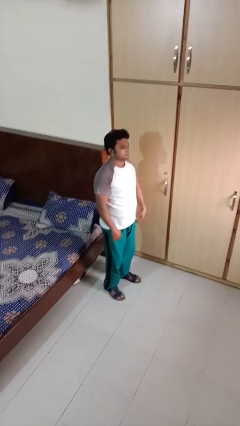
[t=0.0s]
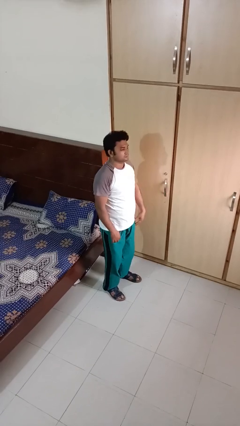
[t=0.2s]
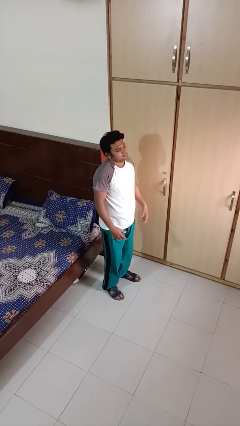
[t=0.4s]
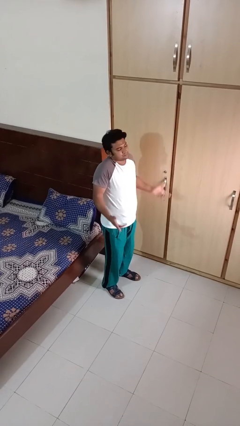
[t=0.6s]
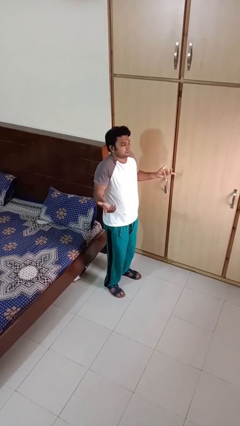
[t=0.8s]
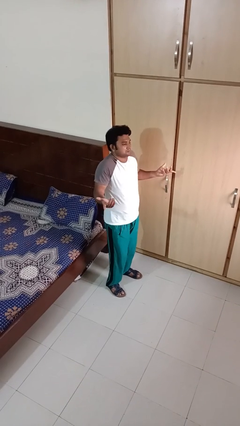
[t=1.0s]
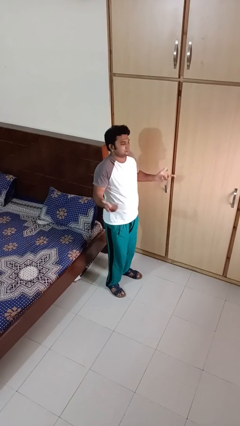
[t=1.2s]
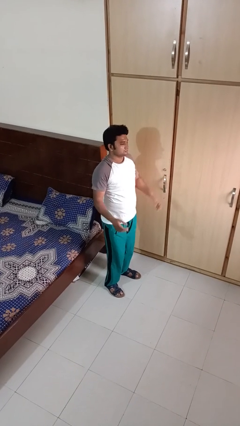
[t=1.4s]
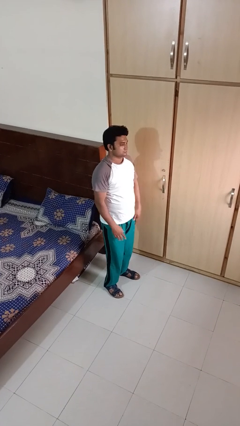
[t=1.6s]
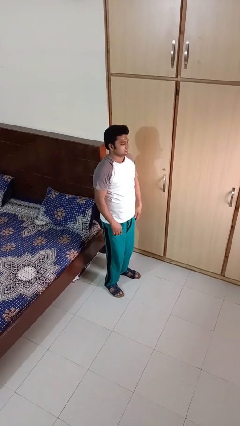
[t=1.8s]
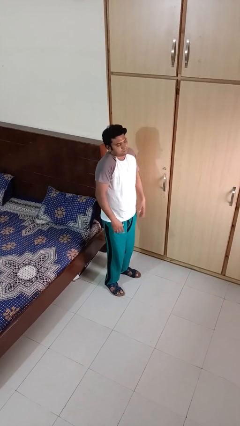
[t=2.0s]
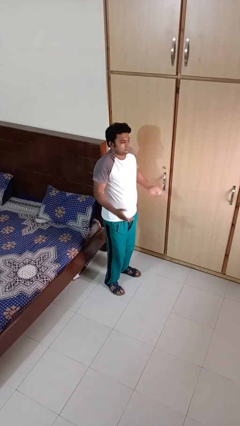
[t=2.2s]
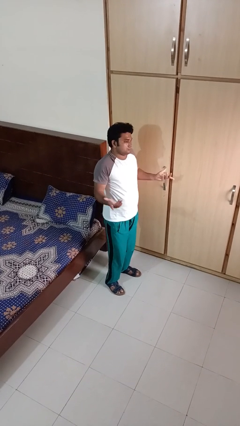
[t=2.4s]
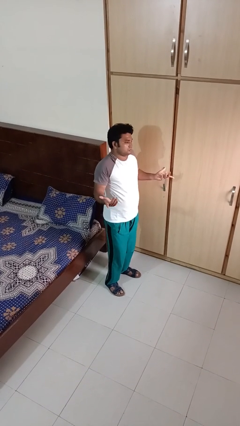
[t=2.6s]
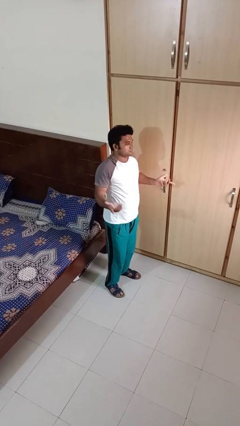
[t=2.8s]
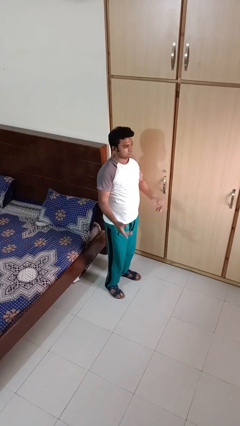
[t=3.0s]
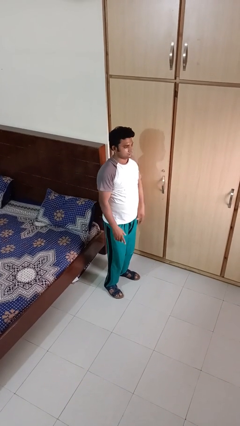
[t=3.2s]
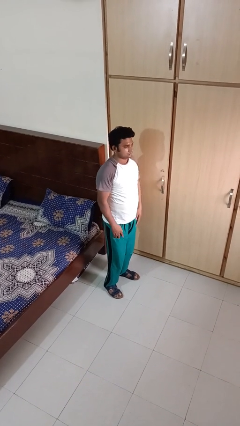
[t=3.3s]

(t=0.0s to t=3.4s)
person shrugs

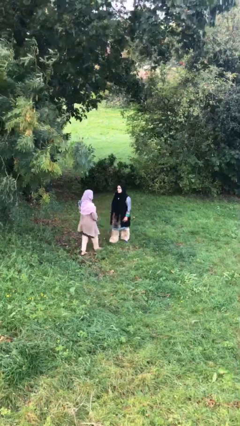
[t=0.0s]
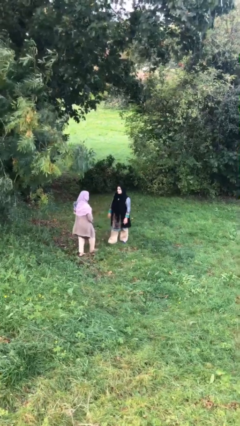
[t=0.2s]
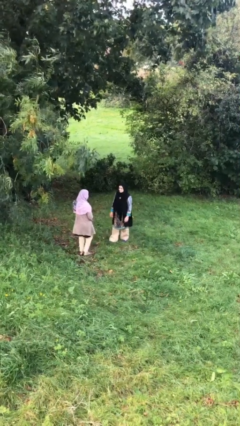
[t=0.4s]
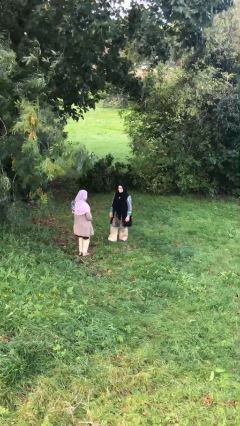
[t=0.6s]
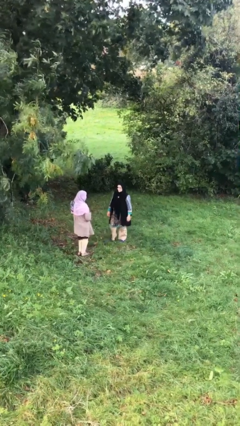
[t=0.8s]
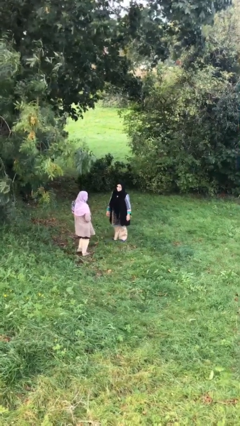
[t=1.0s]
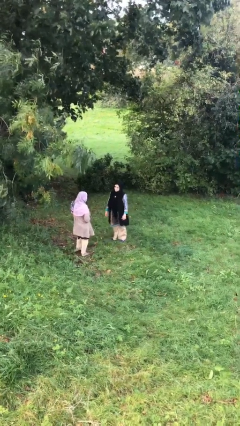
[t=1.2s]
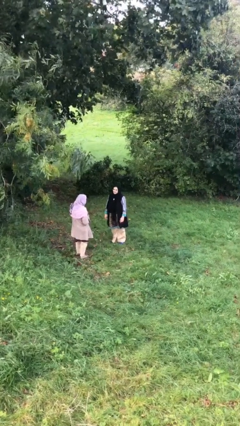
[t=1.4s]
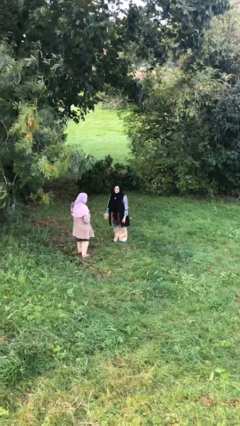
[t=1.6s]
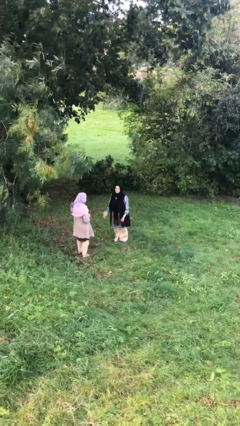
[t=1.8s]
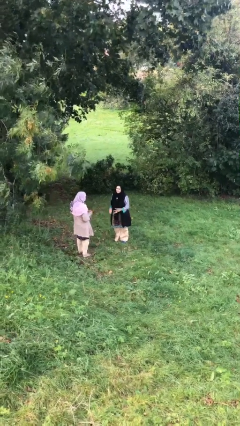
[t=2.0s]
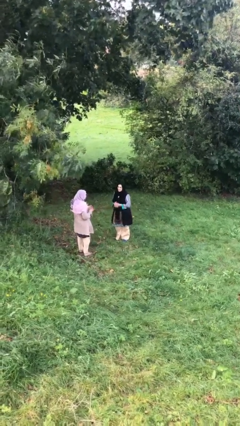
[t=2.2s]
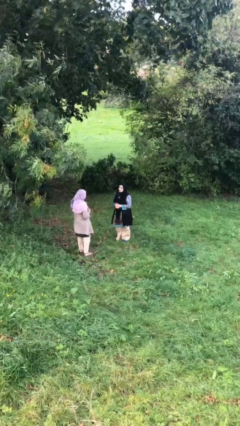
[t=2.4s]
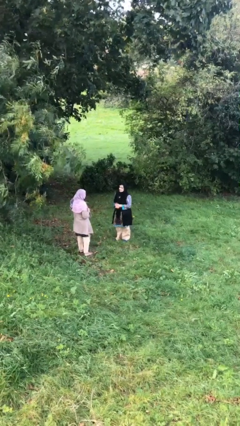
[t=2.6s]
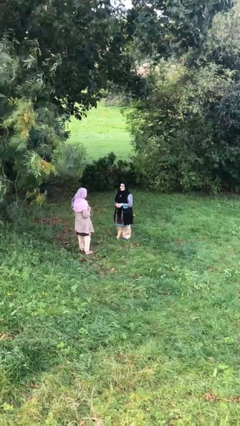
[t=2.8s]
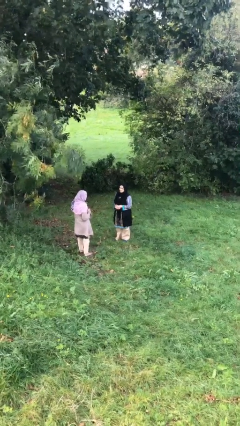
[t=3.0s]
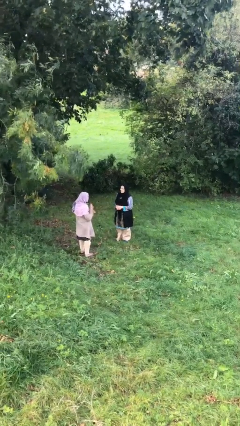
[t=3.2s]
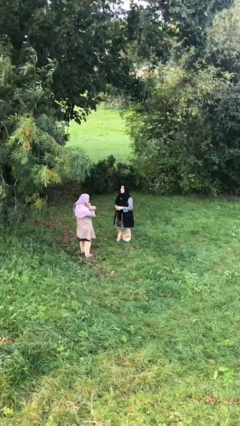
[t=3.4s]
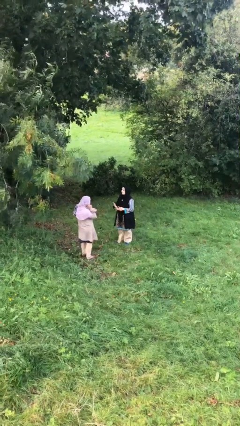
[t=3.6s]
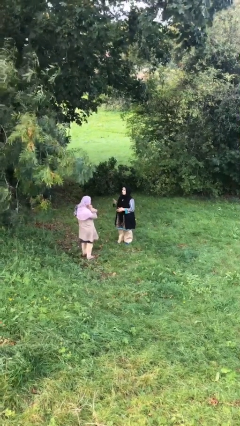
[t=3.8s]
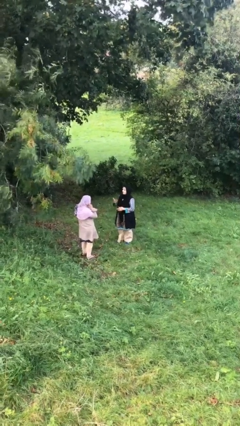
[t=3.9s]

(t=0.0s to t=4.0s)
person talks to person

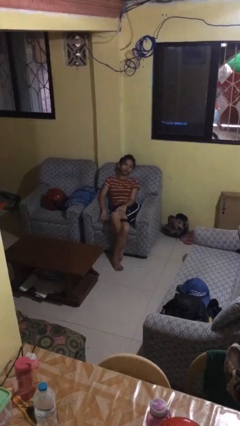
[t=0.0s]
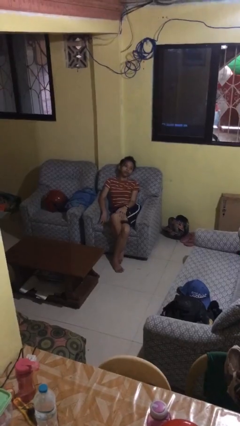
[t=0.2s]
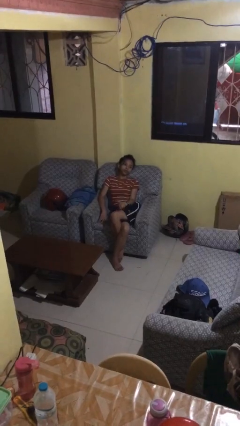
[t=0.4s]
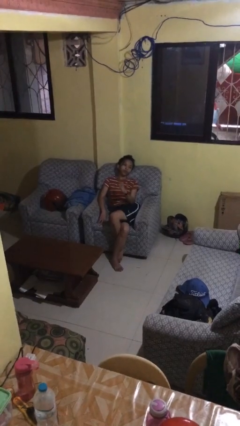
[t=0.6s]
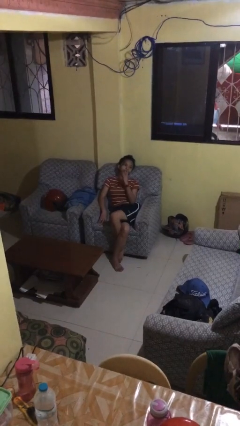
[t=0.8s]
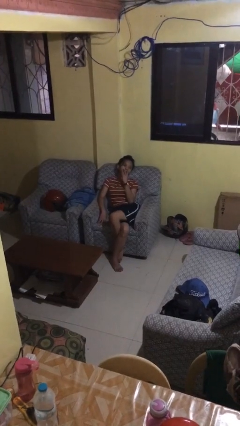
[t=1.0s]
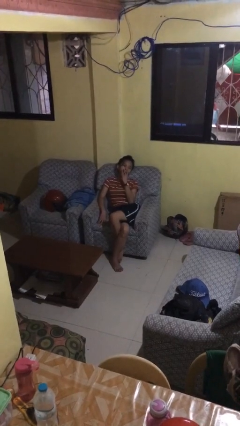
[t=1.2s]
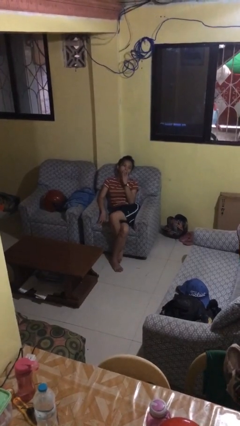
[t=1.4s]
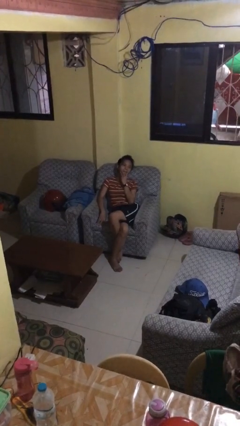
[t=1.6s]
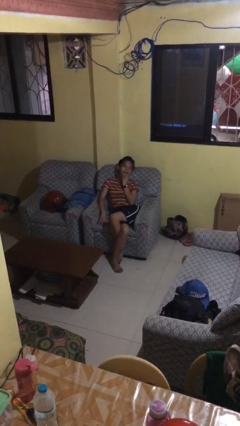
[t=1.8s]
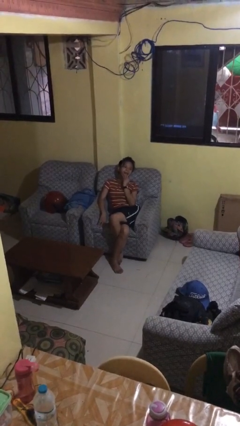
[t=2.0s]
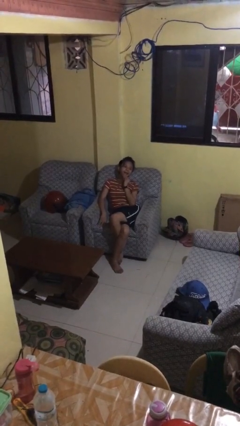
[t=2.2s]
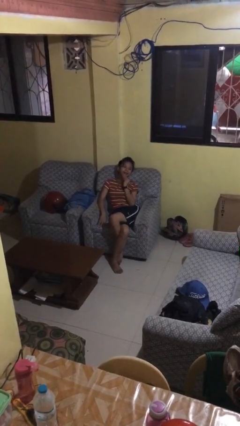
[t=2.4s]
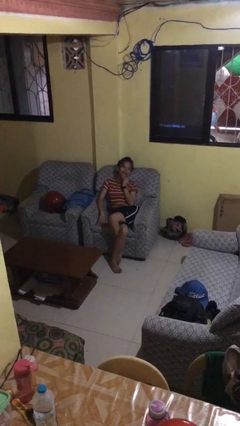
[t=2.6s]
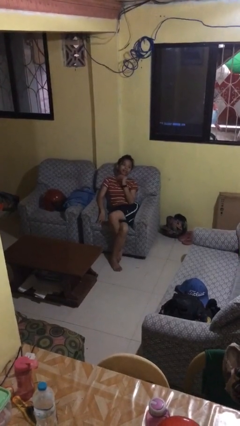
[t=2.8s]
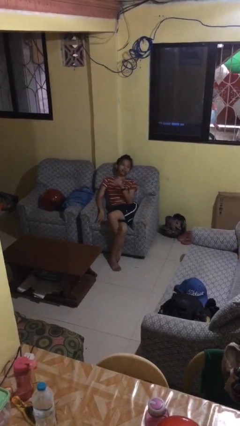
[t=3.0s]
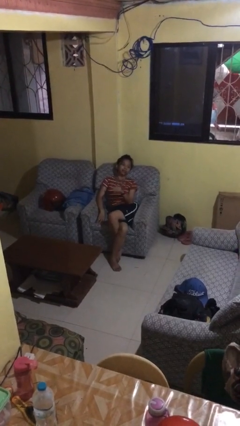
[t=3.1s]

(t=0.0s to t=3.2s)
person strokes chin

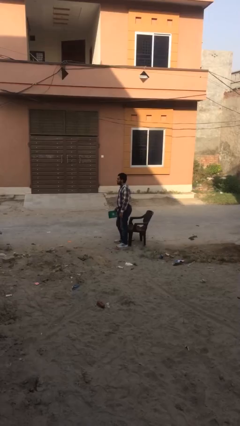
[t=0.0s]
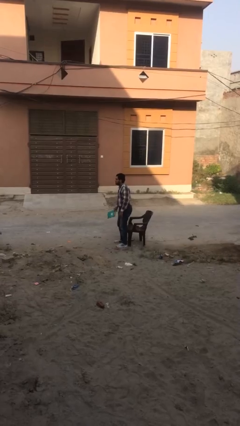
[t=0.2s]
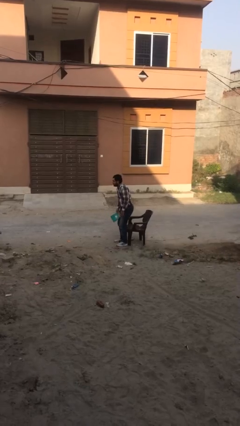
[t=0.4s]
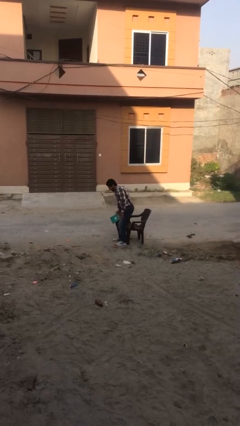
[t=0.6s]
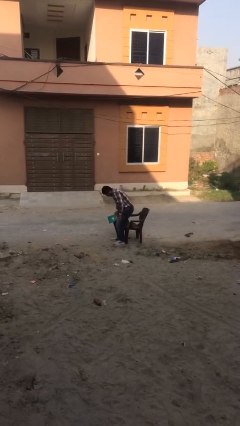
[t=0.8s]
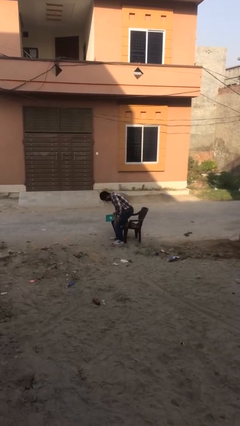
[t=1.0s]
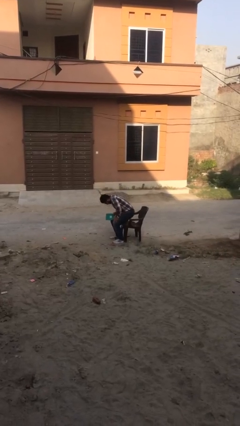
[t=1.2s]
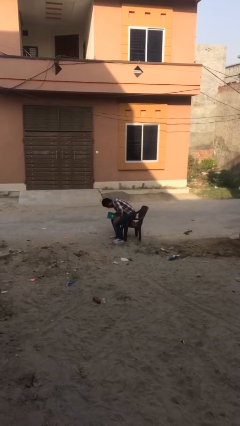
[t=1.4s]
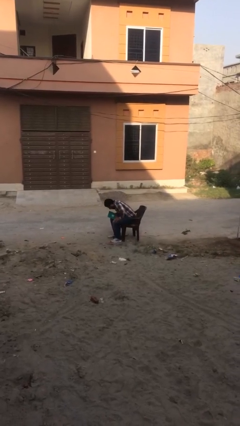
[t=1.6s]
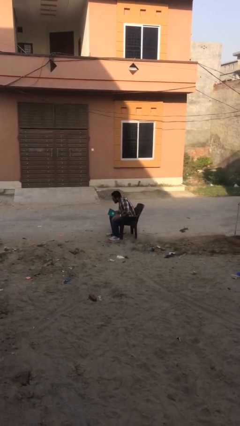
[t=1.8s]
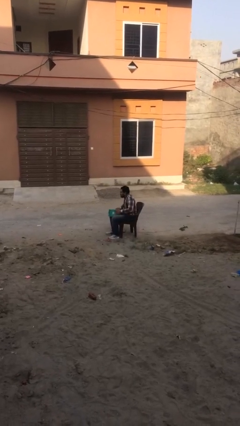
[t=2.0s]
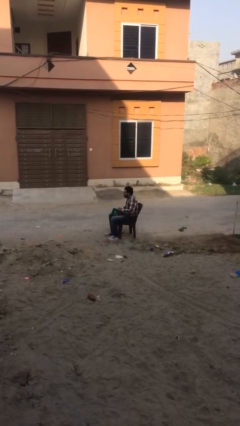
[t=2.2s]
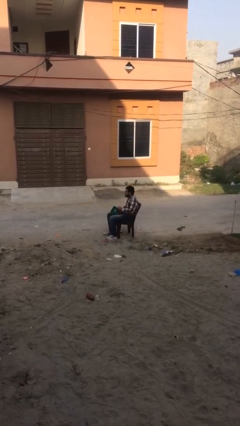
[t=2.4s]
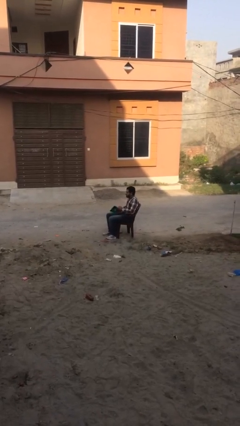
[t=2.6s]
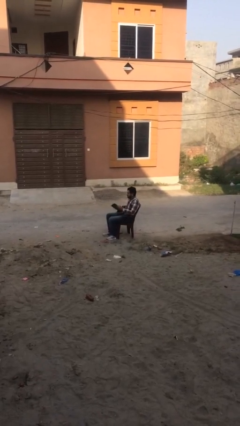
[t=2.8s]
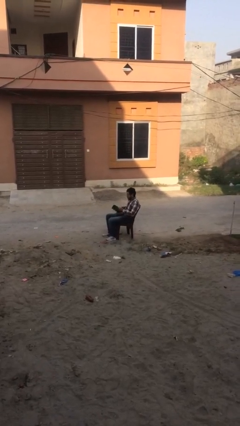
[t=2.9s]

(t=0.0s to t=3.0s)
person sits down

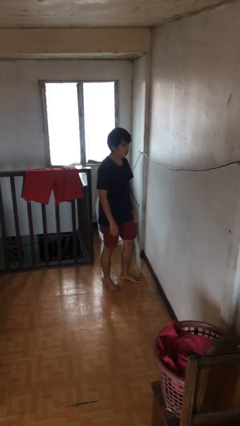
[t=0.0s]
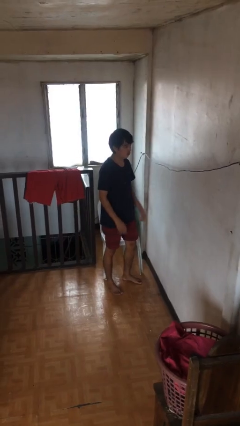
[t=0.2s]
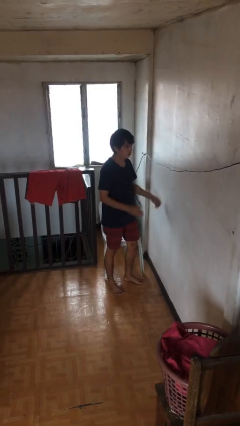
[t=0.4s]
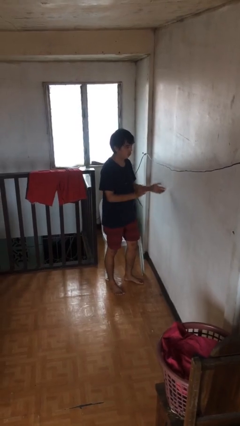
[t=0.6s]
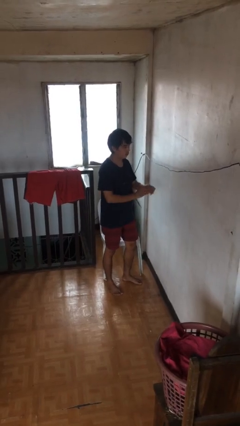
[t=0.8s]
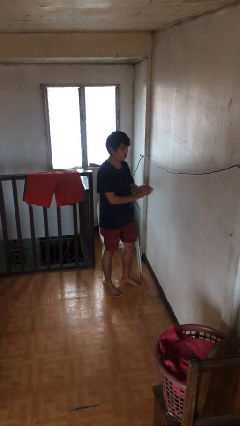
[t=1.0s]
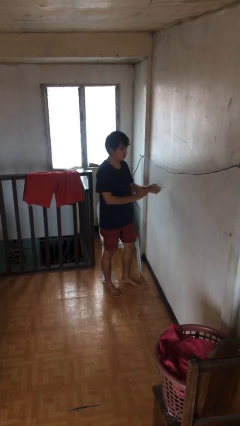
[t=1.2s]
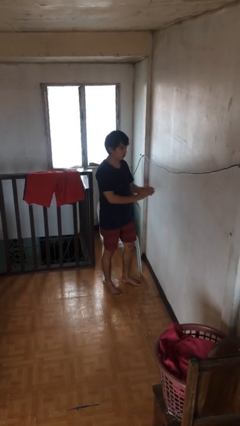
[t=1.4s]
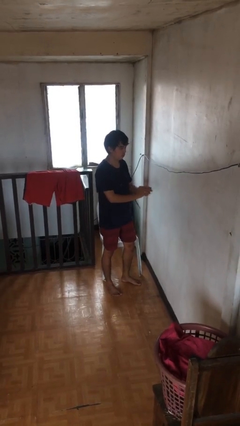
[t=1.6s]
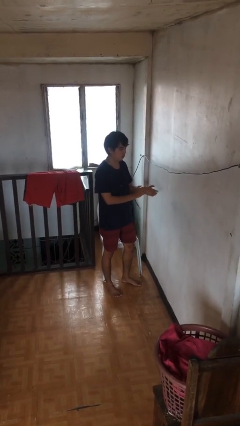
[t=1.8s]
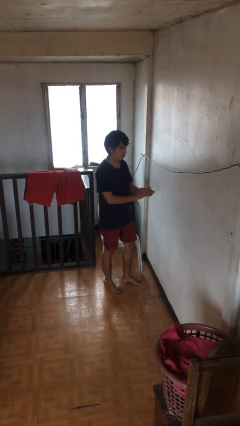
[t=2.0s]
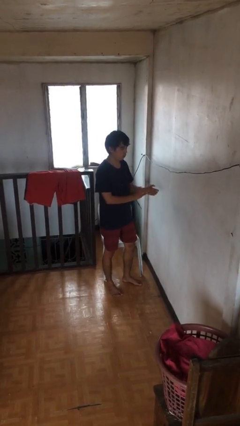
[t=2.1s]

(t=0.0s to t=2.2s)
person claps hands

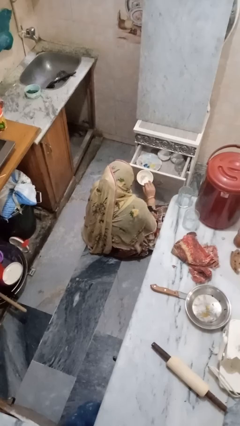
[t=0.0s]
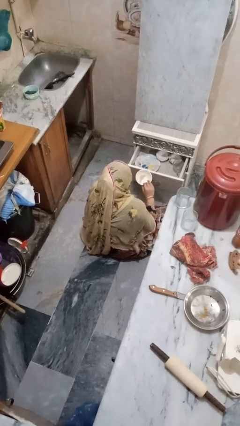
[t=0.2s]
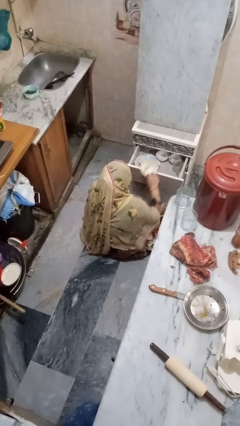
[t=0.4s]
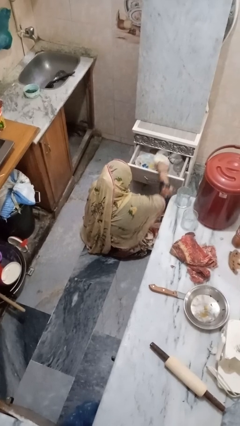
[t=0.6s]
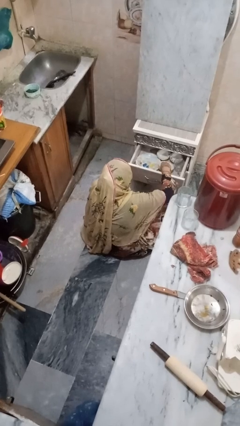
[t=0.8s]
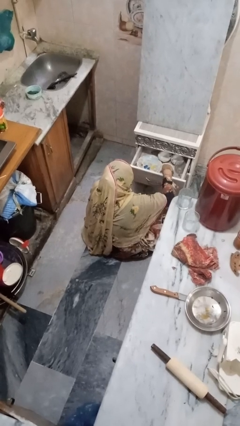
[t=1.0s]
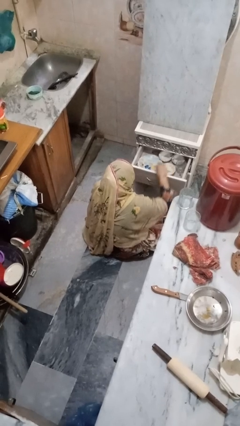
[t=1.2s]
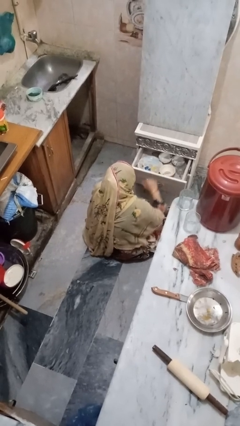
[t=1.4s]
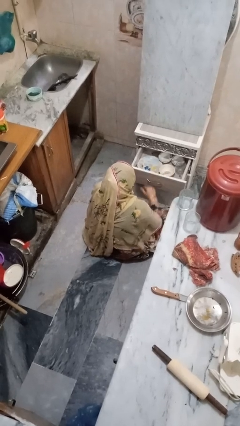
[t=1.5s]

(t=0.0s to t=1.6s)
person puts object into kitchen drawer
